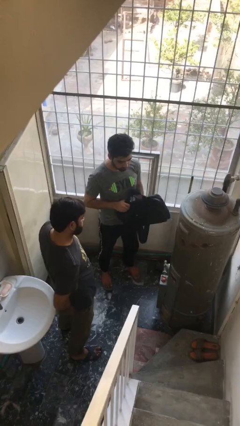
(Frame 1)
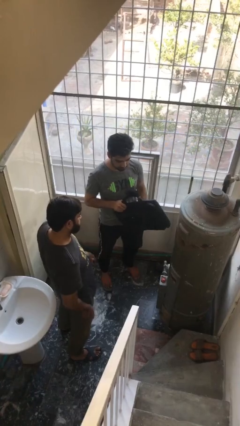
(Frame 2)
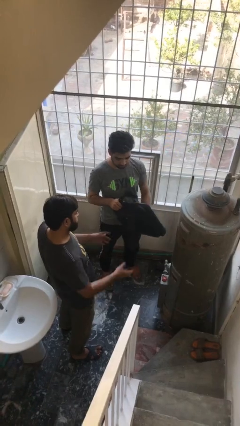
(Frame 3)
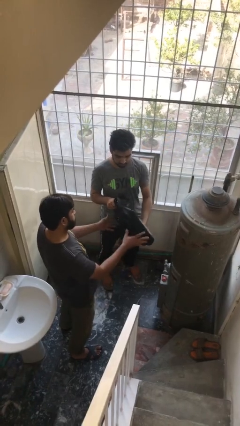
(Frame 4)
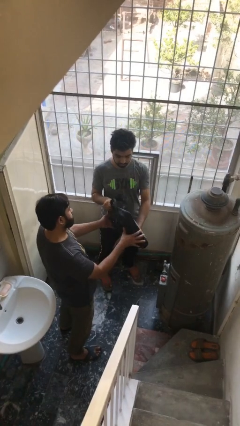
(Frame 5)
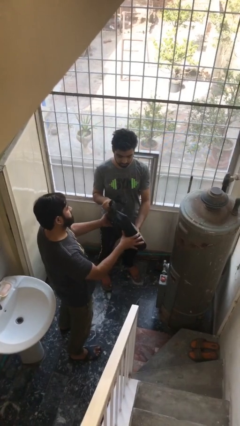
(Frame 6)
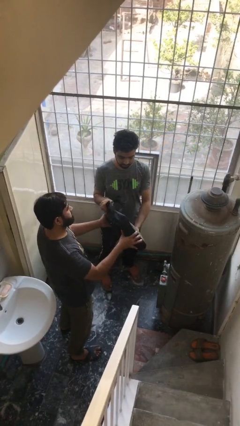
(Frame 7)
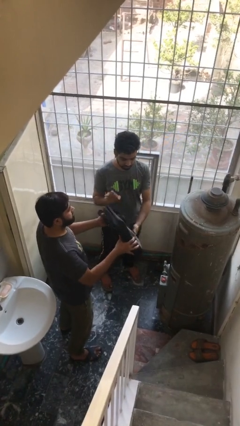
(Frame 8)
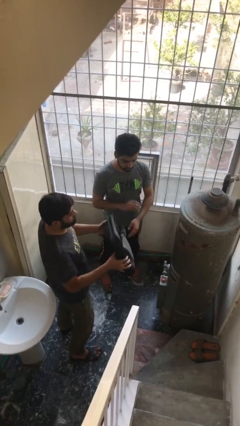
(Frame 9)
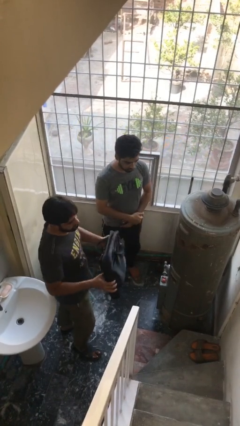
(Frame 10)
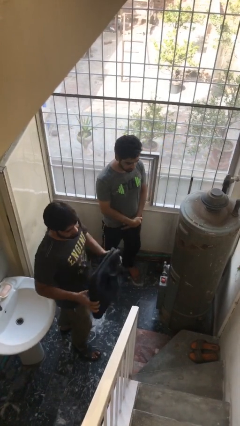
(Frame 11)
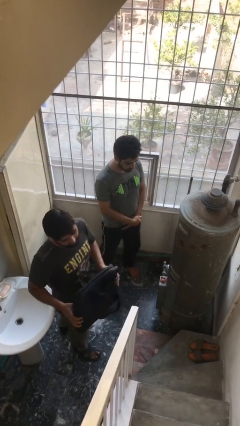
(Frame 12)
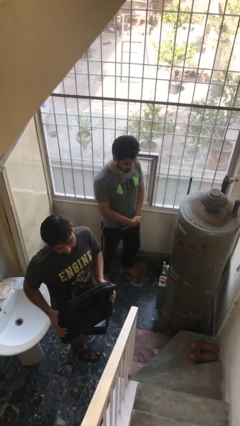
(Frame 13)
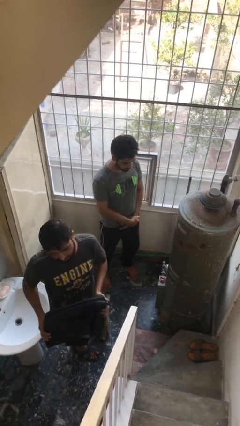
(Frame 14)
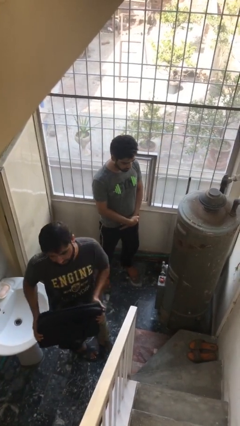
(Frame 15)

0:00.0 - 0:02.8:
person transfers object to person

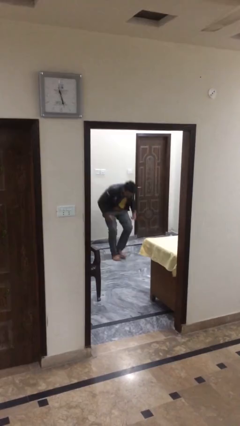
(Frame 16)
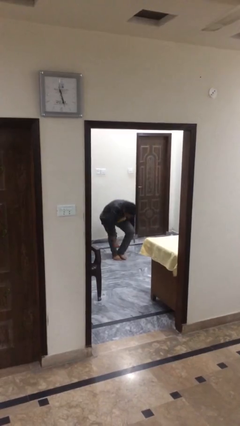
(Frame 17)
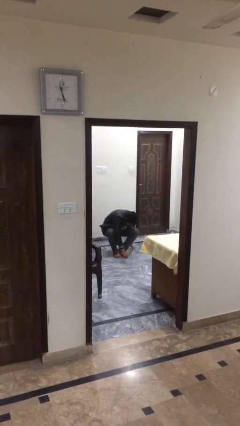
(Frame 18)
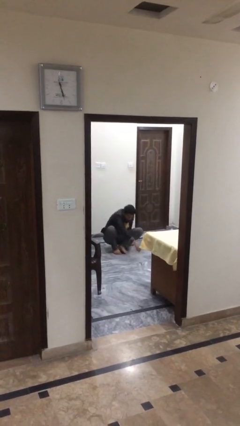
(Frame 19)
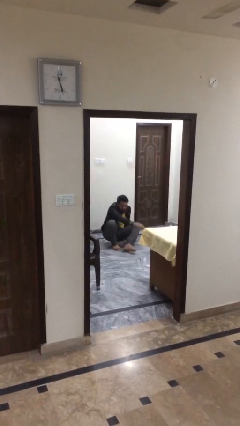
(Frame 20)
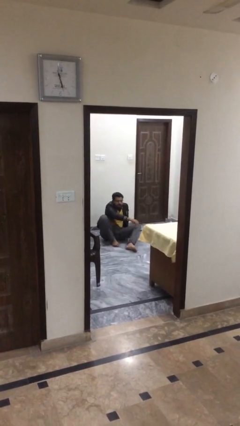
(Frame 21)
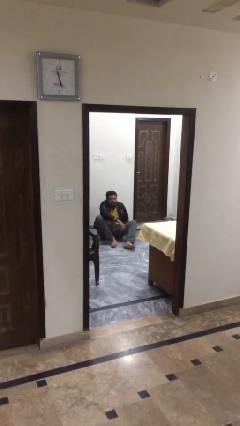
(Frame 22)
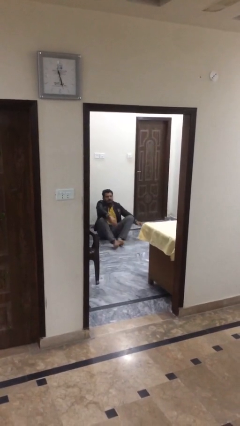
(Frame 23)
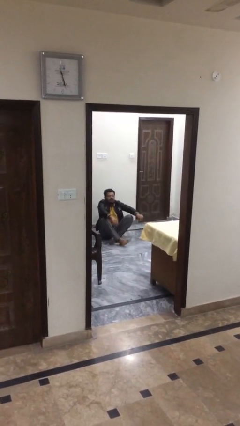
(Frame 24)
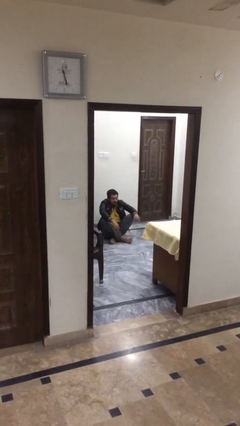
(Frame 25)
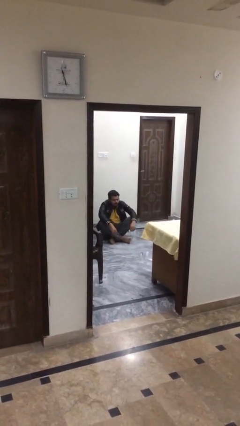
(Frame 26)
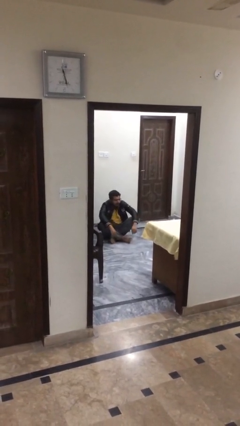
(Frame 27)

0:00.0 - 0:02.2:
person sits down

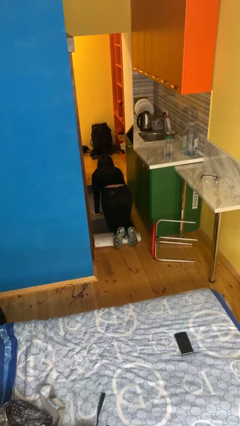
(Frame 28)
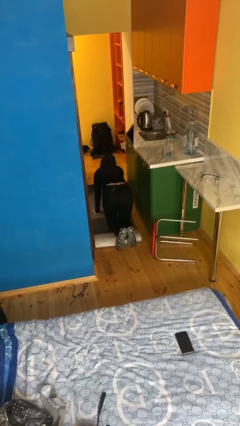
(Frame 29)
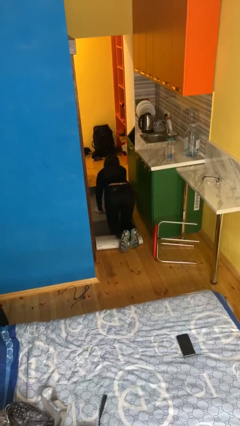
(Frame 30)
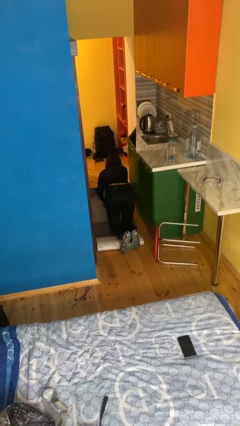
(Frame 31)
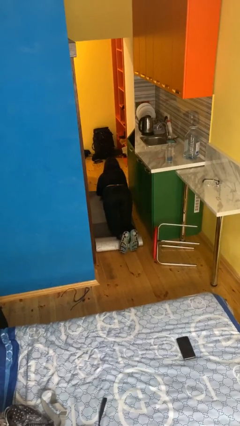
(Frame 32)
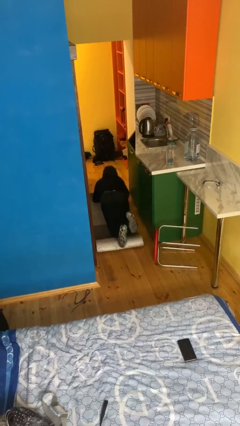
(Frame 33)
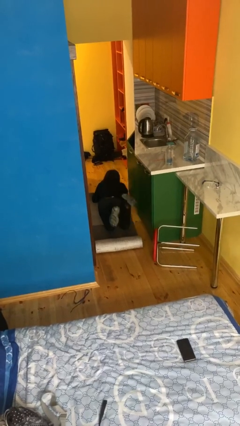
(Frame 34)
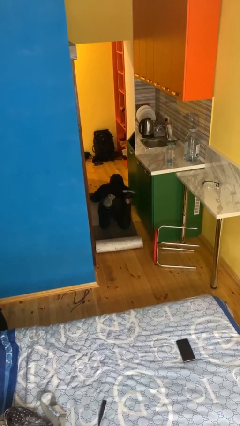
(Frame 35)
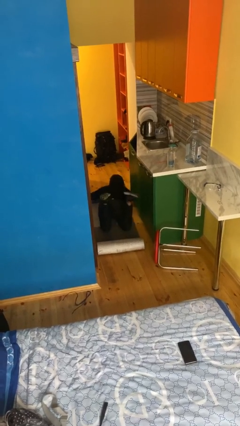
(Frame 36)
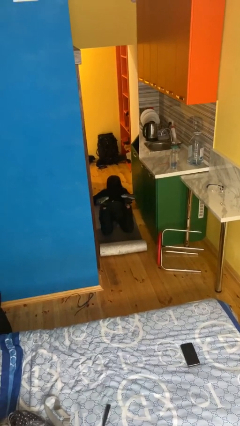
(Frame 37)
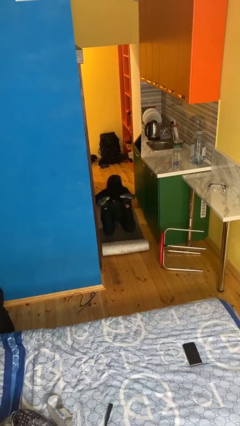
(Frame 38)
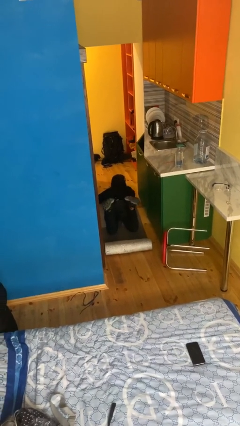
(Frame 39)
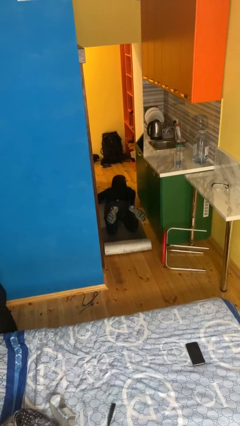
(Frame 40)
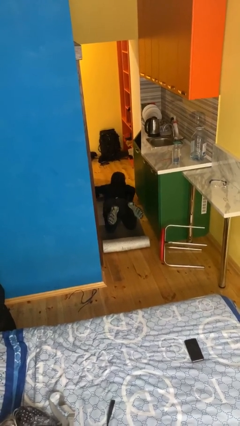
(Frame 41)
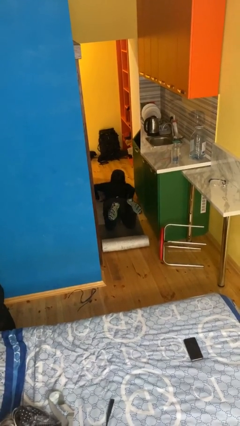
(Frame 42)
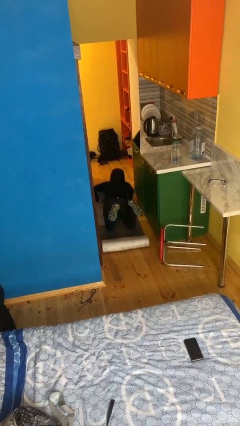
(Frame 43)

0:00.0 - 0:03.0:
person lies down on floor

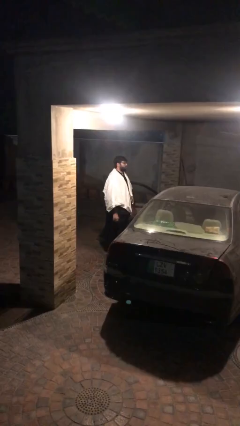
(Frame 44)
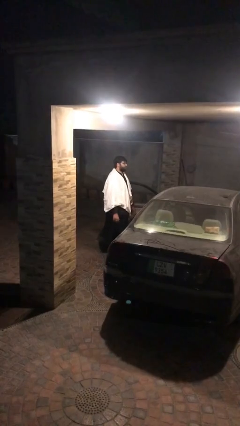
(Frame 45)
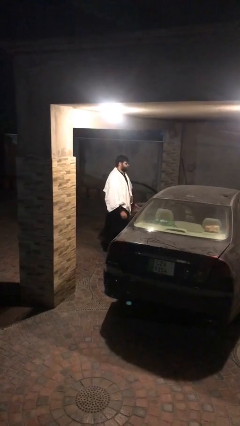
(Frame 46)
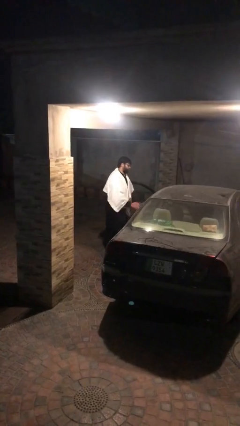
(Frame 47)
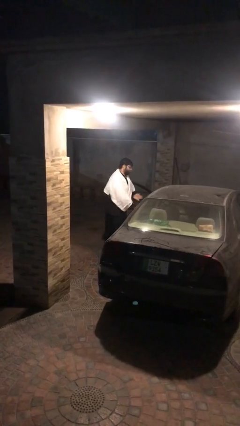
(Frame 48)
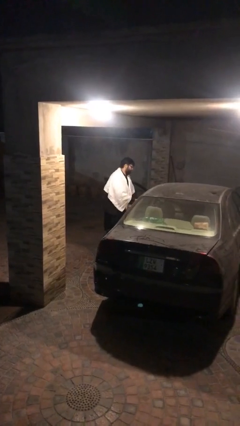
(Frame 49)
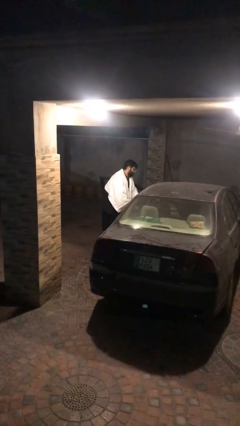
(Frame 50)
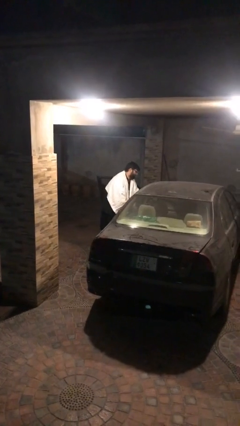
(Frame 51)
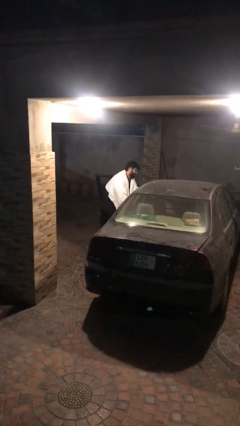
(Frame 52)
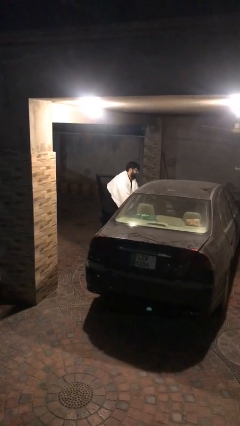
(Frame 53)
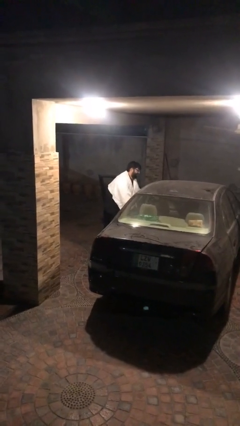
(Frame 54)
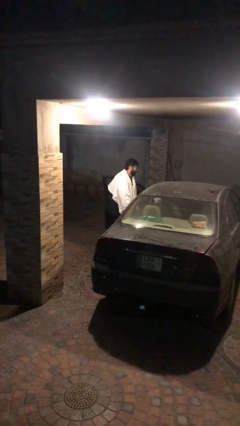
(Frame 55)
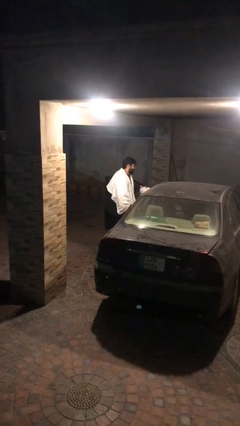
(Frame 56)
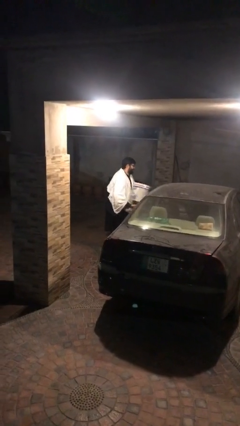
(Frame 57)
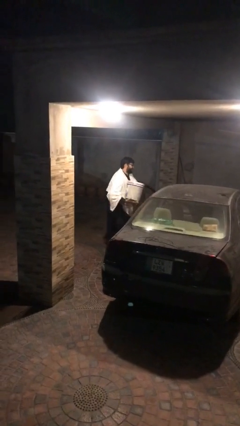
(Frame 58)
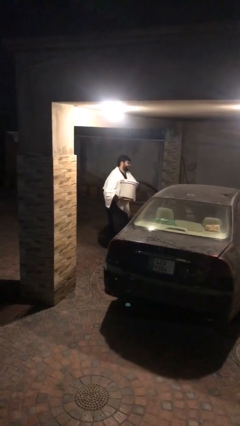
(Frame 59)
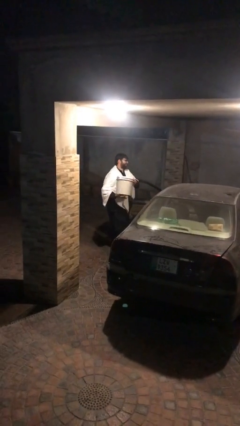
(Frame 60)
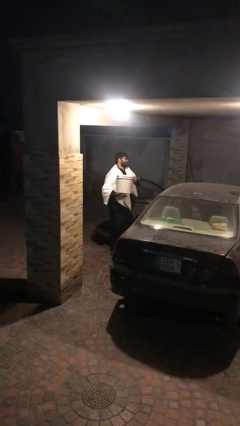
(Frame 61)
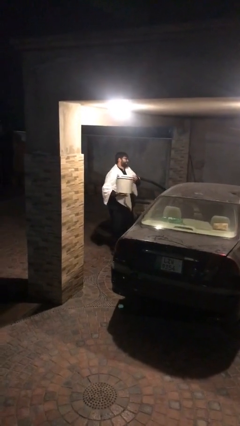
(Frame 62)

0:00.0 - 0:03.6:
person unloads car

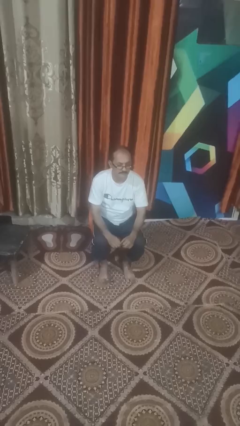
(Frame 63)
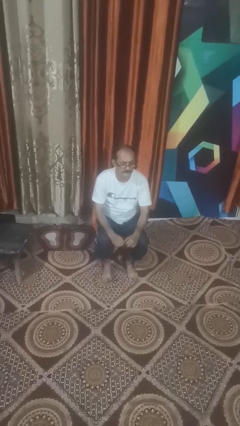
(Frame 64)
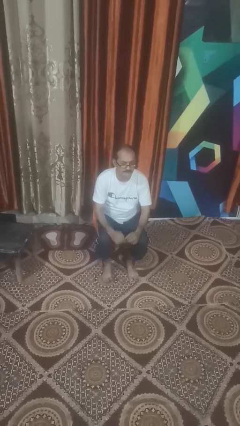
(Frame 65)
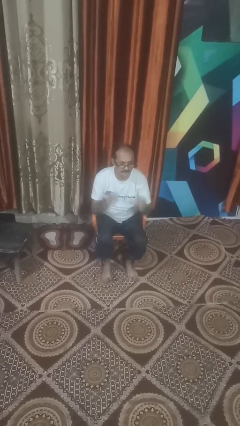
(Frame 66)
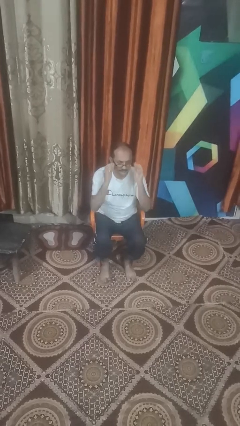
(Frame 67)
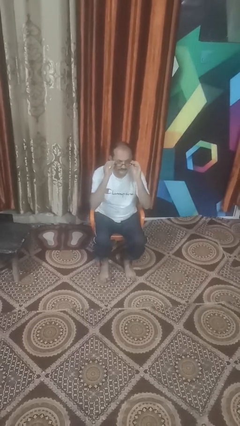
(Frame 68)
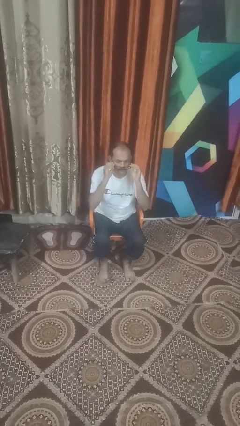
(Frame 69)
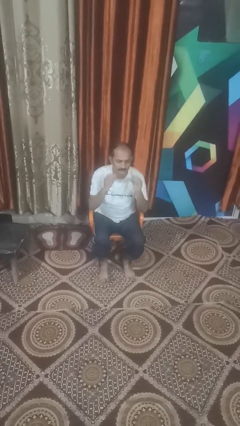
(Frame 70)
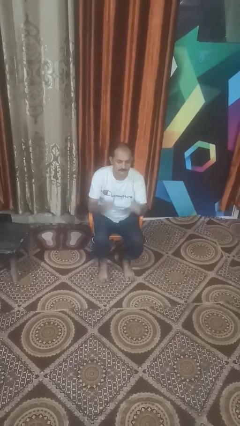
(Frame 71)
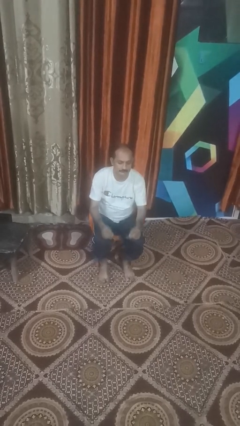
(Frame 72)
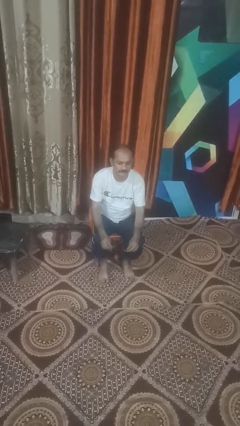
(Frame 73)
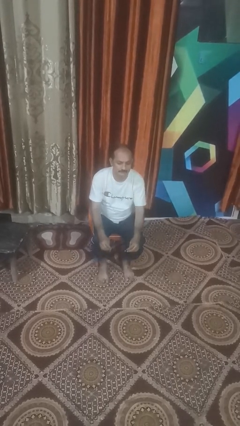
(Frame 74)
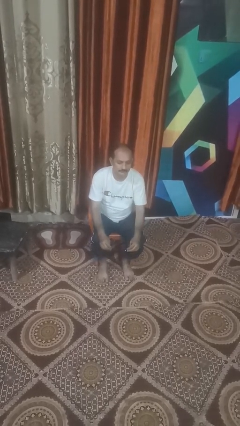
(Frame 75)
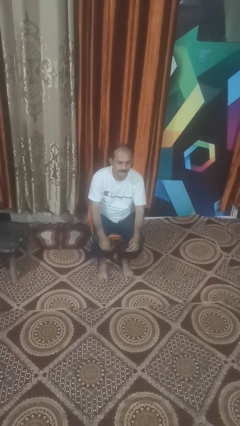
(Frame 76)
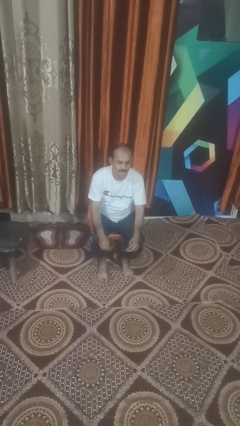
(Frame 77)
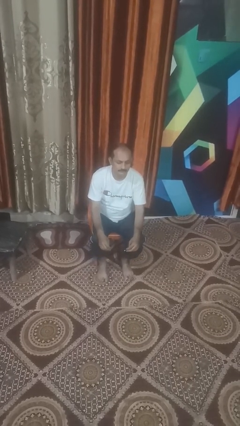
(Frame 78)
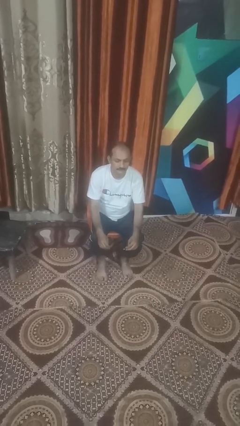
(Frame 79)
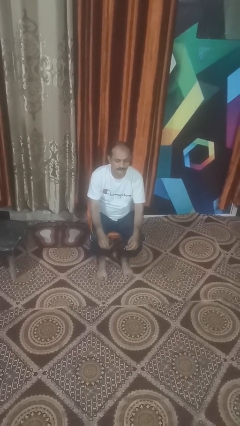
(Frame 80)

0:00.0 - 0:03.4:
person takes off glasses

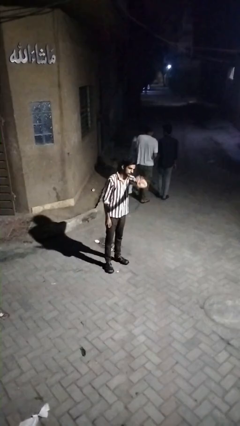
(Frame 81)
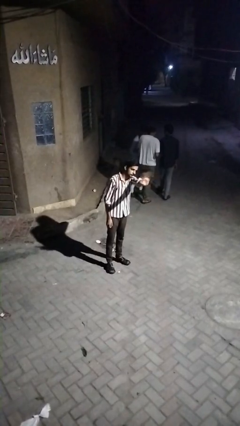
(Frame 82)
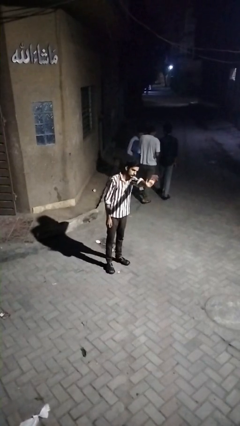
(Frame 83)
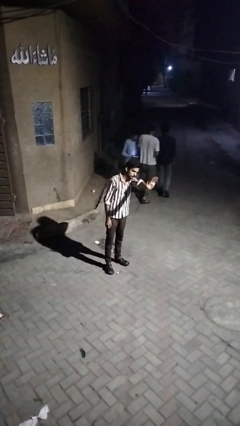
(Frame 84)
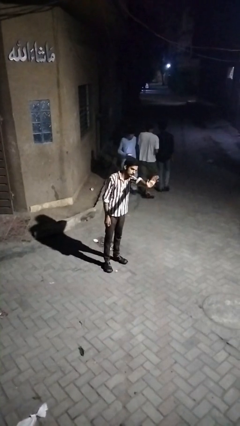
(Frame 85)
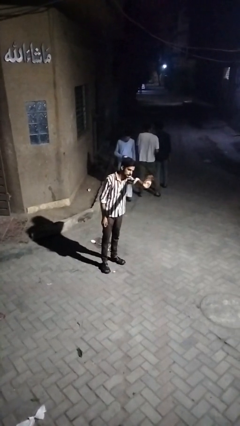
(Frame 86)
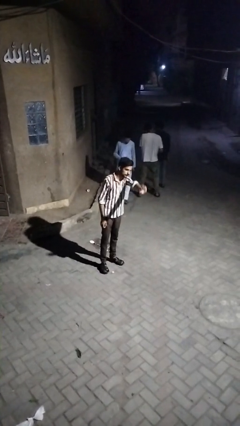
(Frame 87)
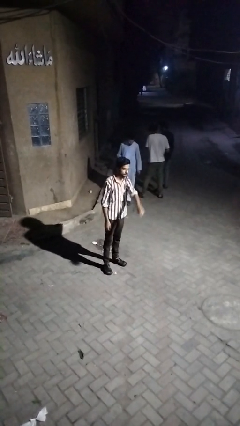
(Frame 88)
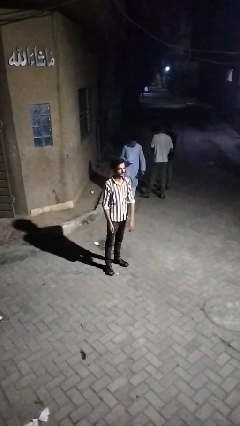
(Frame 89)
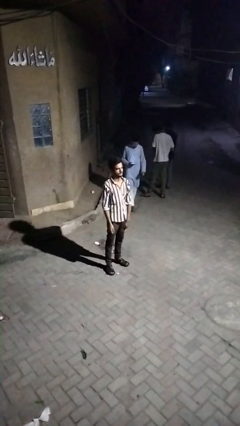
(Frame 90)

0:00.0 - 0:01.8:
person waves at person

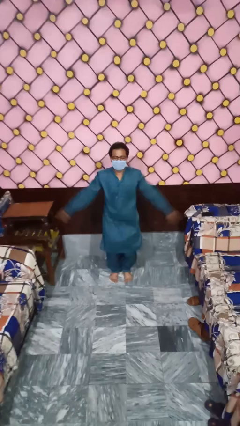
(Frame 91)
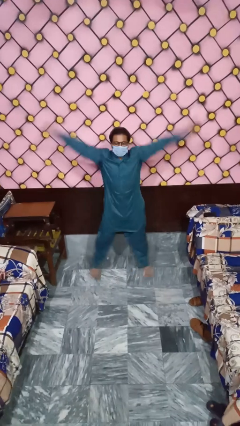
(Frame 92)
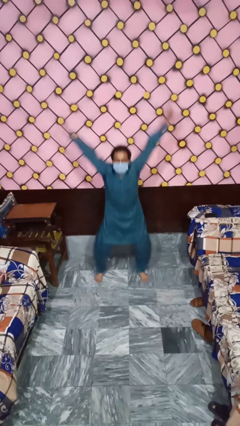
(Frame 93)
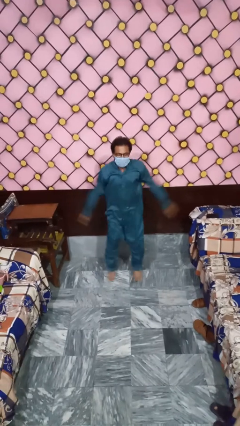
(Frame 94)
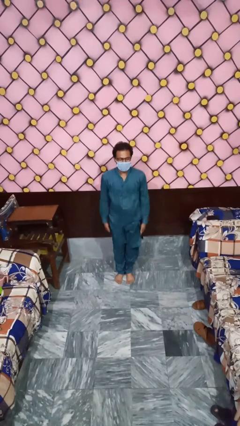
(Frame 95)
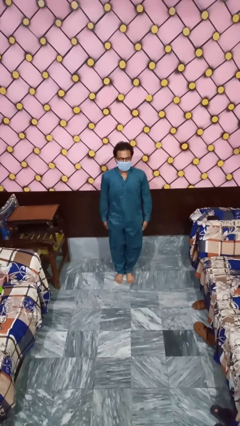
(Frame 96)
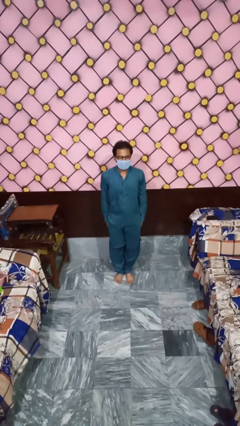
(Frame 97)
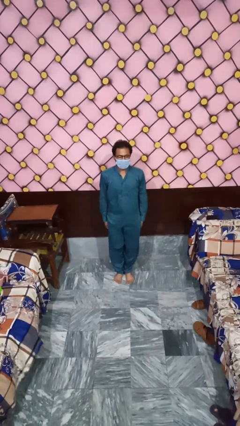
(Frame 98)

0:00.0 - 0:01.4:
person exercises with jumping jacks
